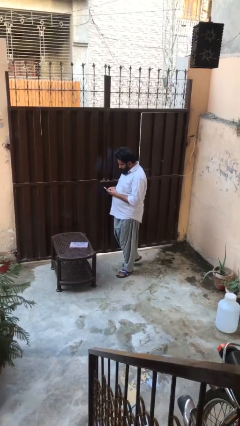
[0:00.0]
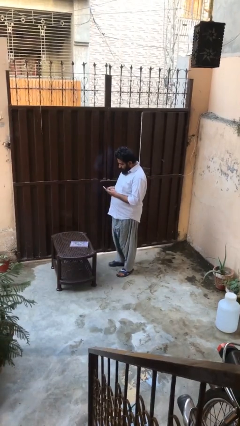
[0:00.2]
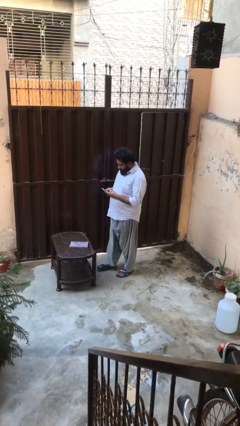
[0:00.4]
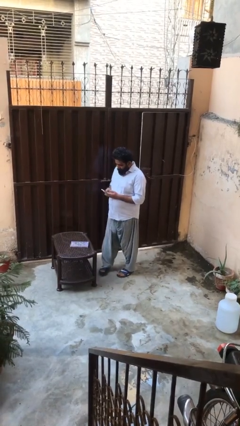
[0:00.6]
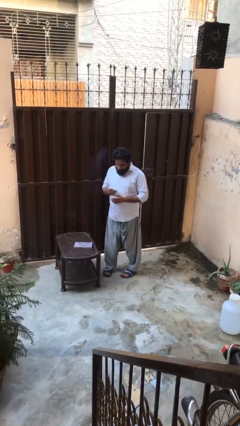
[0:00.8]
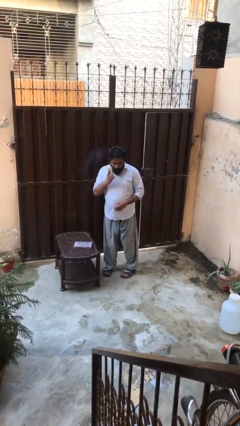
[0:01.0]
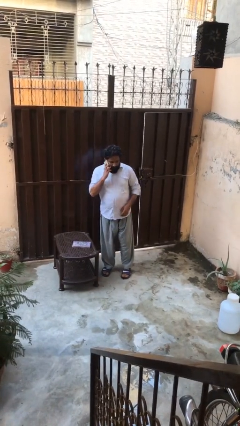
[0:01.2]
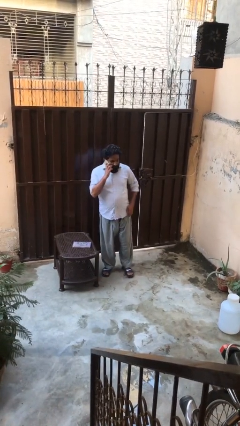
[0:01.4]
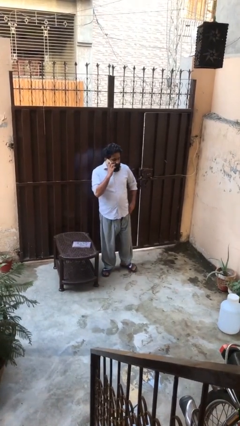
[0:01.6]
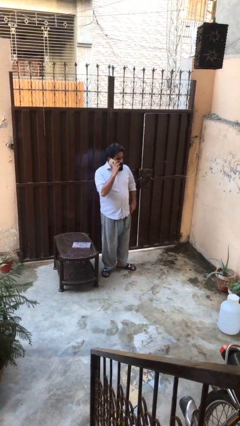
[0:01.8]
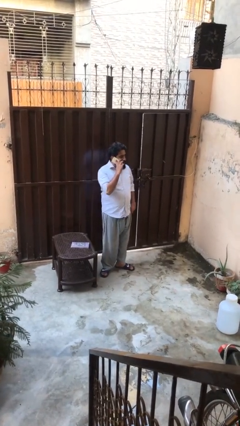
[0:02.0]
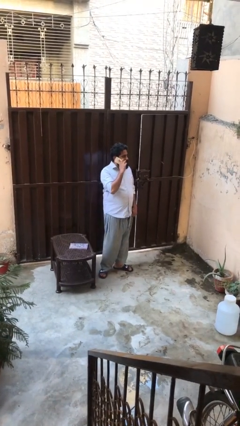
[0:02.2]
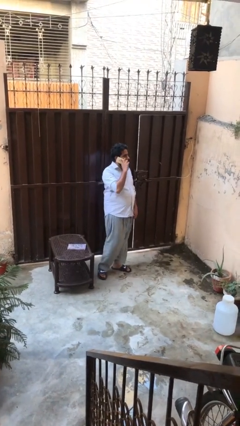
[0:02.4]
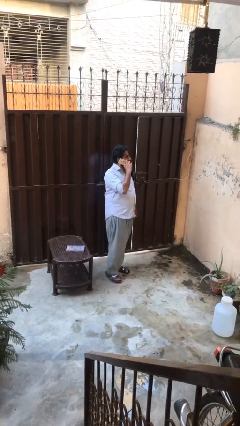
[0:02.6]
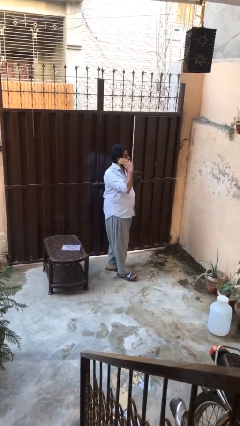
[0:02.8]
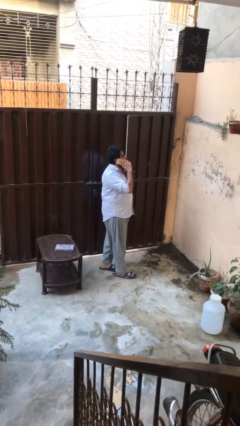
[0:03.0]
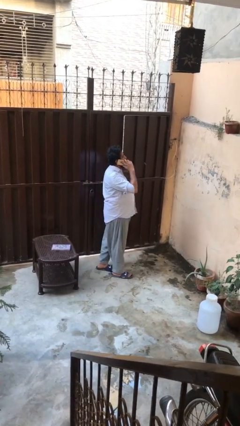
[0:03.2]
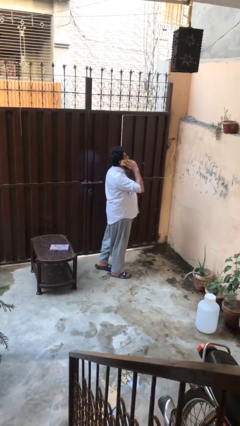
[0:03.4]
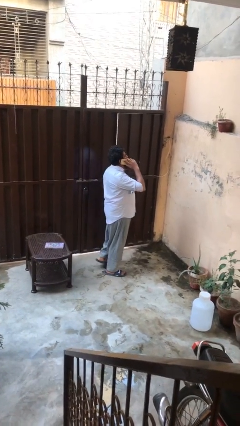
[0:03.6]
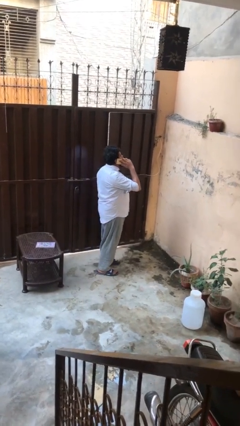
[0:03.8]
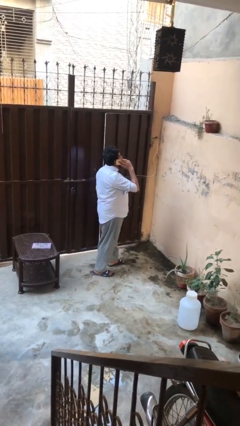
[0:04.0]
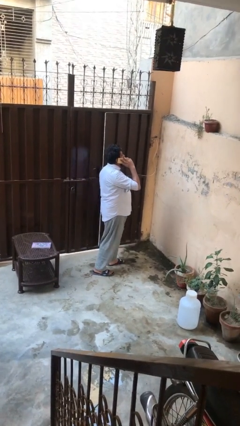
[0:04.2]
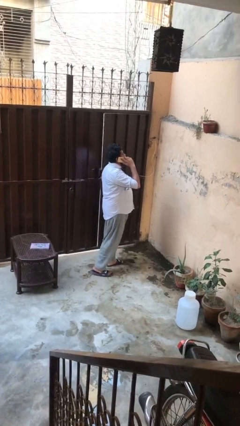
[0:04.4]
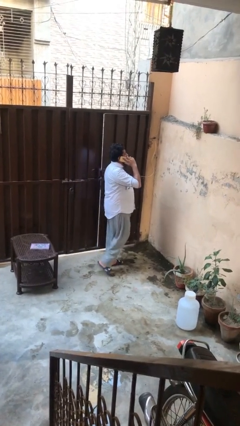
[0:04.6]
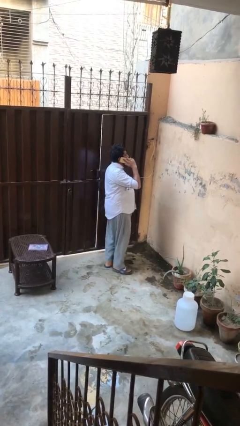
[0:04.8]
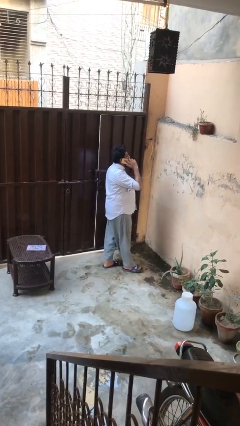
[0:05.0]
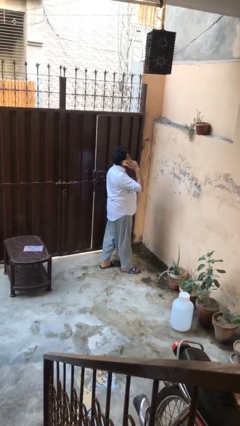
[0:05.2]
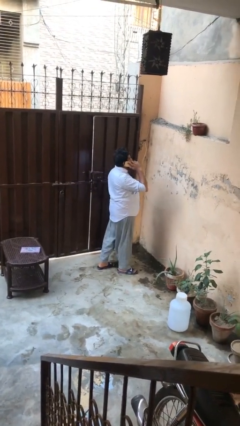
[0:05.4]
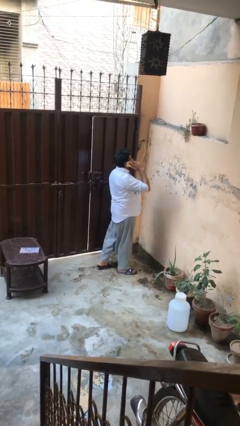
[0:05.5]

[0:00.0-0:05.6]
person talks on phone

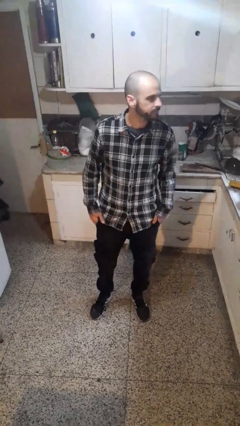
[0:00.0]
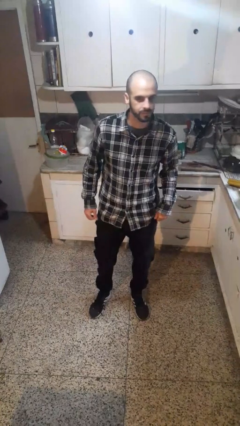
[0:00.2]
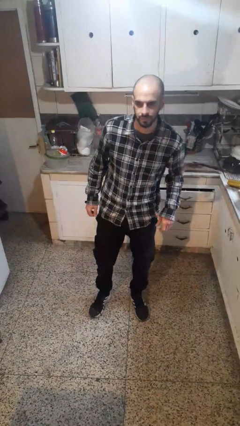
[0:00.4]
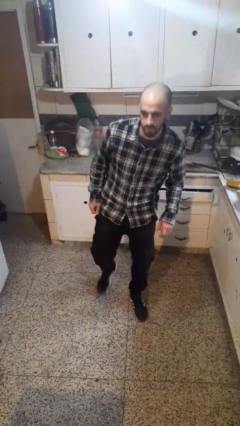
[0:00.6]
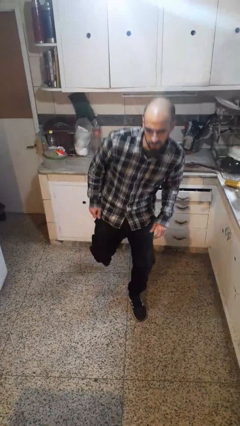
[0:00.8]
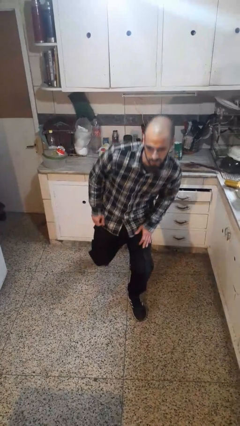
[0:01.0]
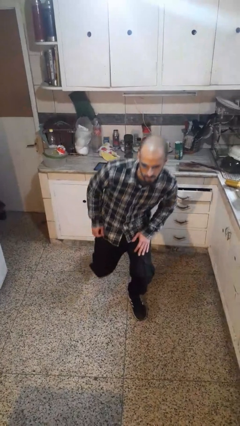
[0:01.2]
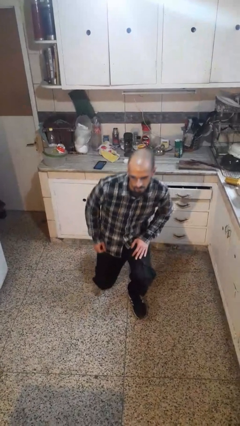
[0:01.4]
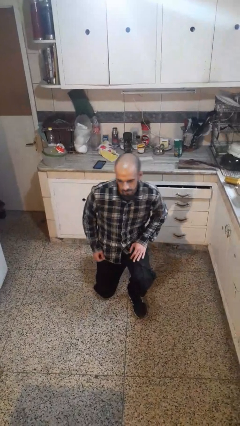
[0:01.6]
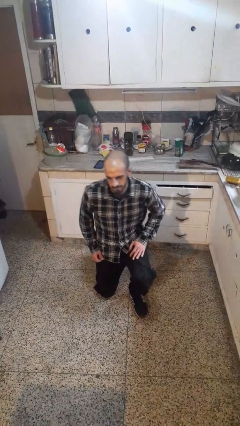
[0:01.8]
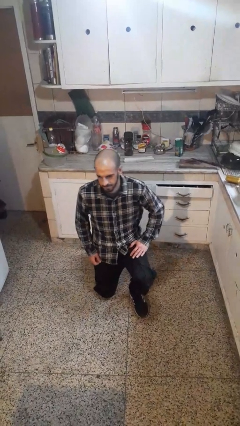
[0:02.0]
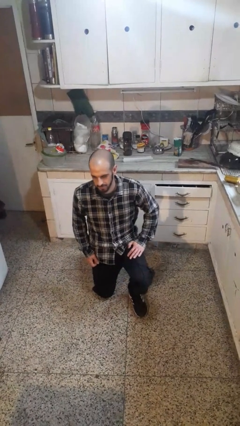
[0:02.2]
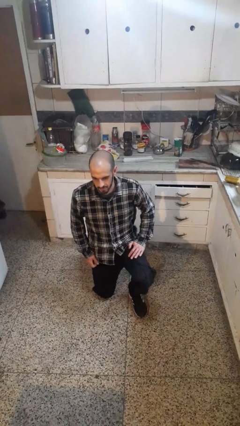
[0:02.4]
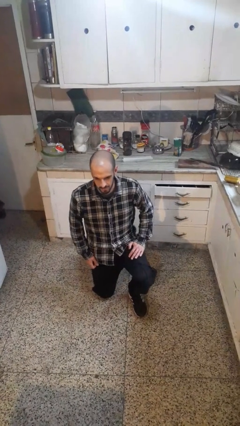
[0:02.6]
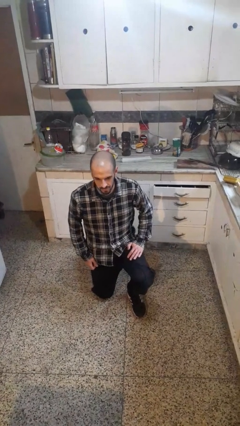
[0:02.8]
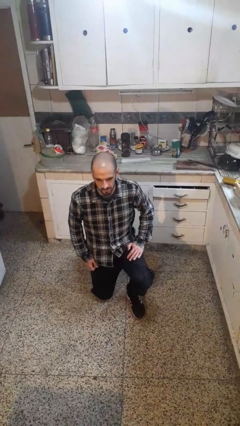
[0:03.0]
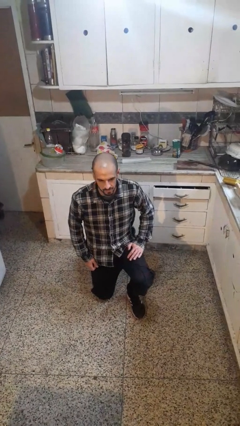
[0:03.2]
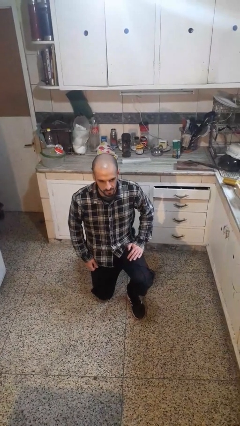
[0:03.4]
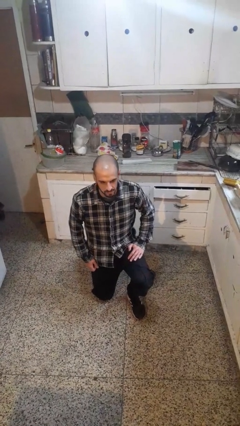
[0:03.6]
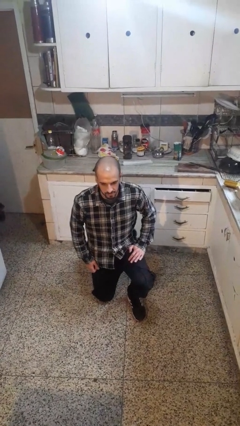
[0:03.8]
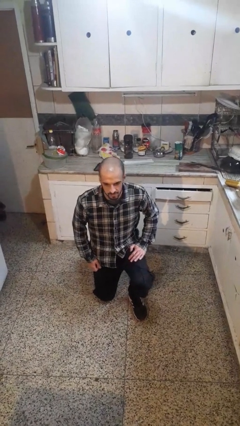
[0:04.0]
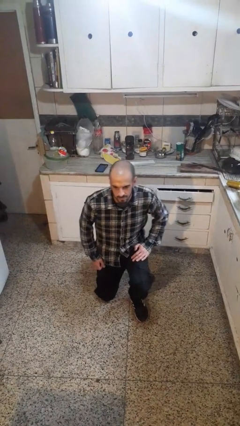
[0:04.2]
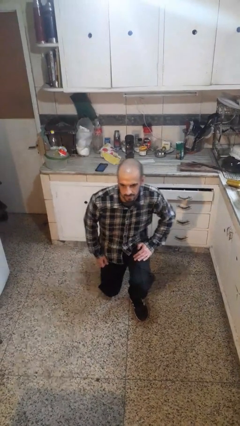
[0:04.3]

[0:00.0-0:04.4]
person kneels

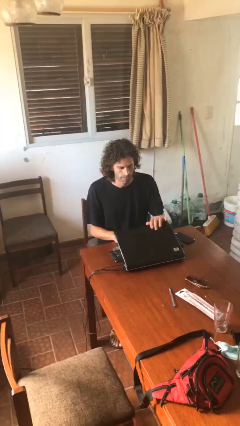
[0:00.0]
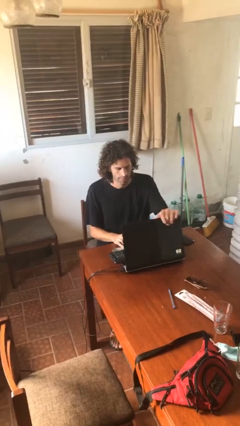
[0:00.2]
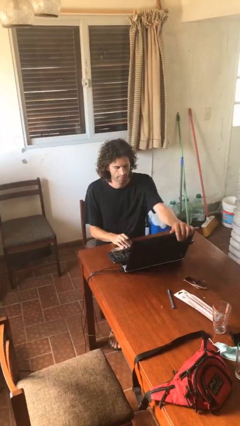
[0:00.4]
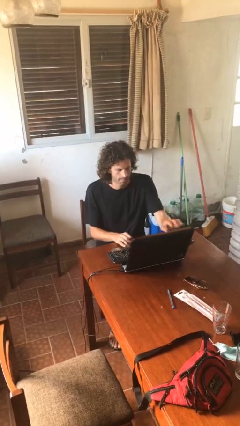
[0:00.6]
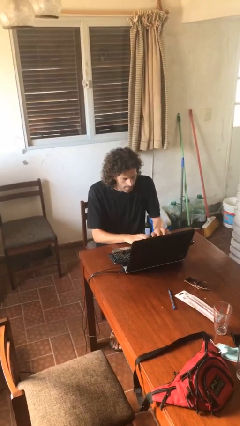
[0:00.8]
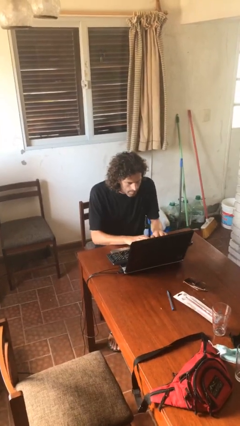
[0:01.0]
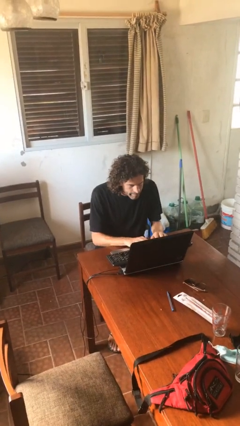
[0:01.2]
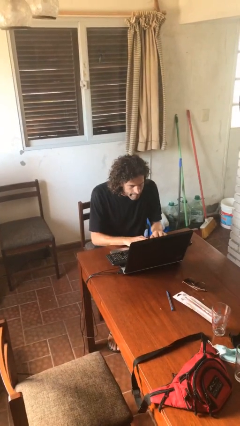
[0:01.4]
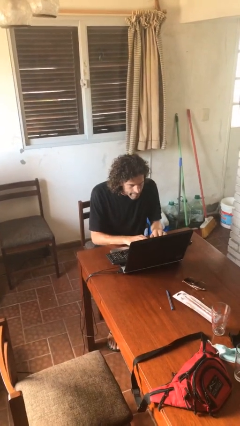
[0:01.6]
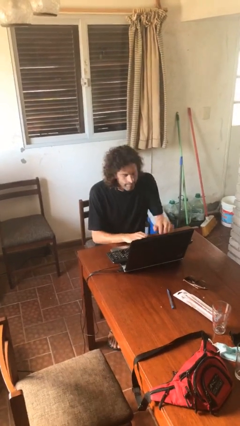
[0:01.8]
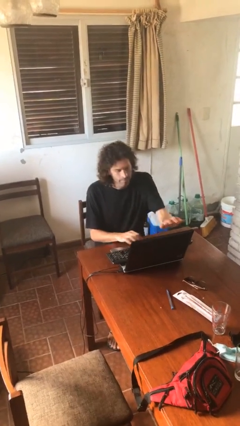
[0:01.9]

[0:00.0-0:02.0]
person interacts with laptop

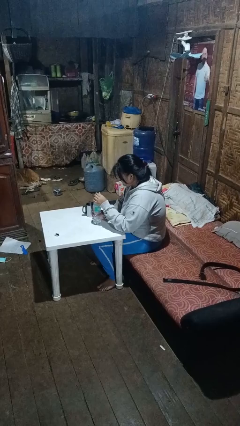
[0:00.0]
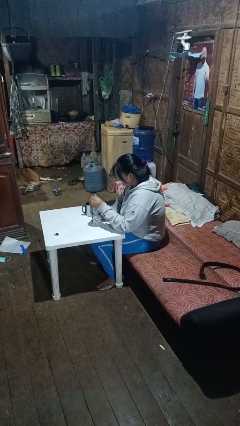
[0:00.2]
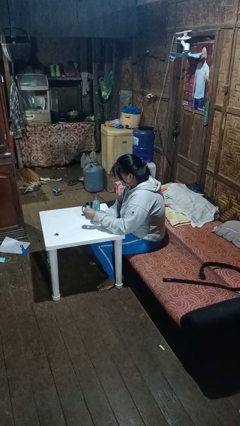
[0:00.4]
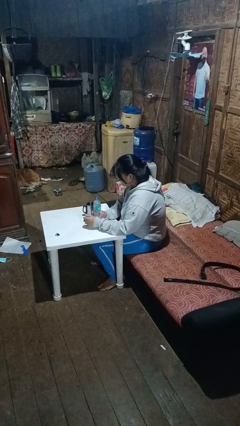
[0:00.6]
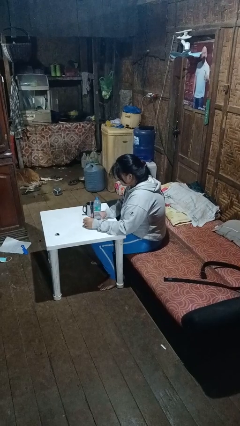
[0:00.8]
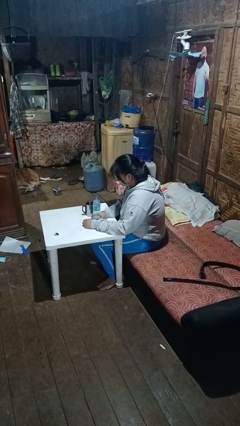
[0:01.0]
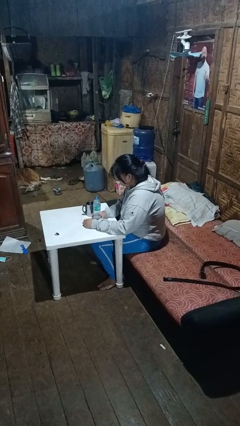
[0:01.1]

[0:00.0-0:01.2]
person unscrews lid from bottle

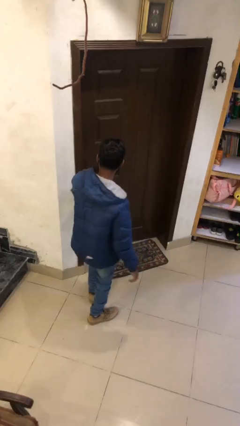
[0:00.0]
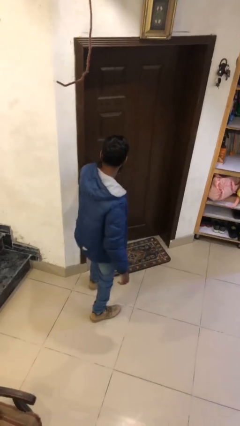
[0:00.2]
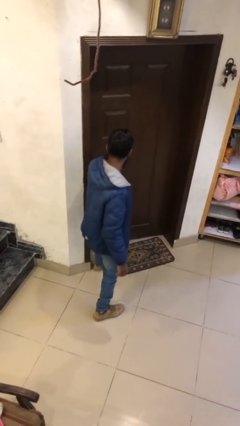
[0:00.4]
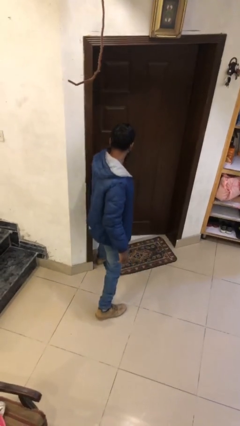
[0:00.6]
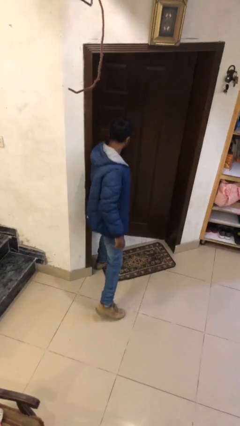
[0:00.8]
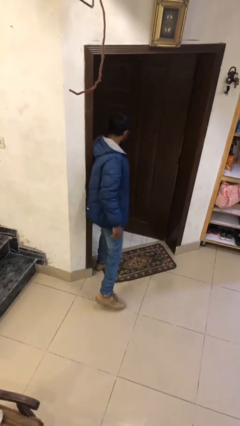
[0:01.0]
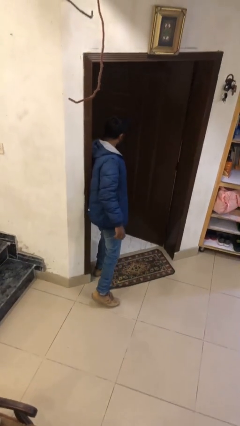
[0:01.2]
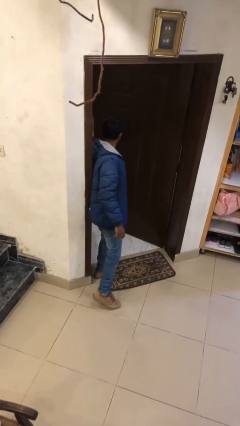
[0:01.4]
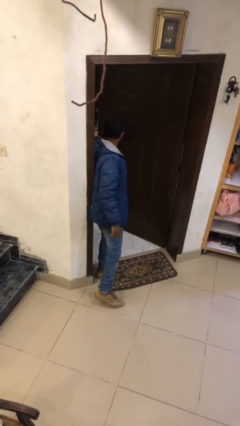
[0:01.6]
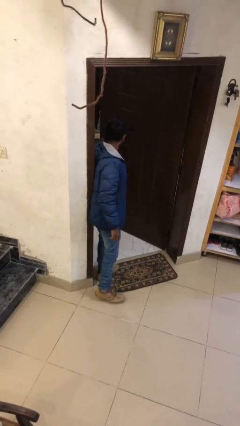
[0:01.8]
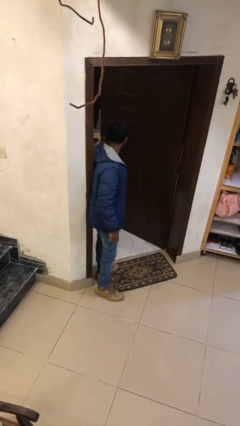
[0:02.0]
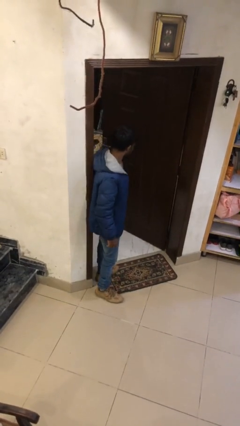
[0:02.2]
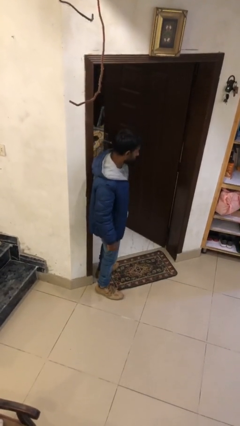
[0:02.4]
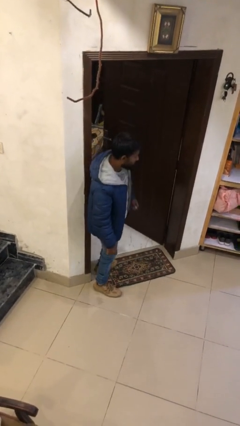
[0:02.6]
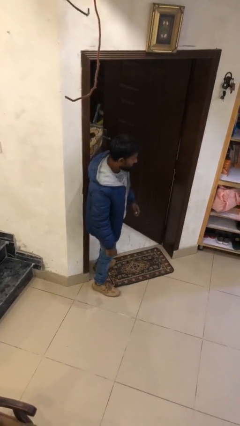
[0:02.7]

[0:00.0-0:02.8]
person opens facility door

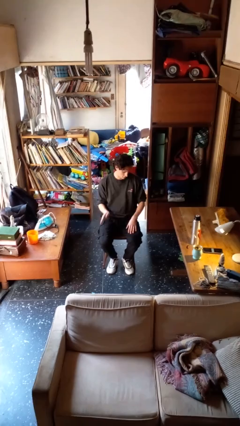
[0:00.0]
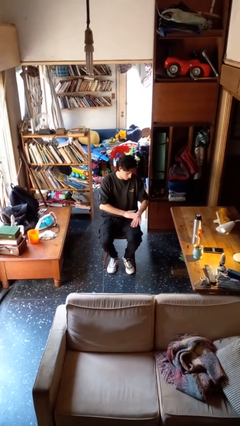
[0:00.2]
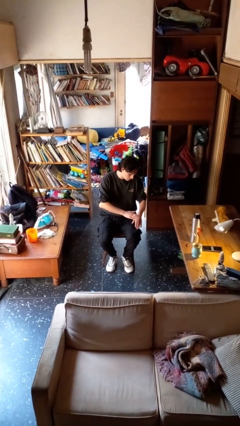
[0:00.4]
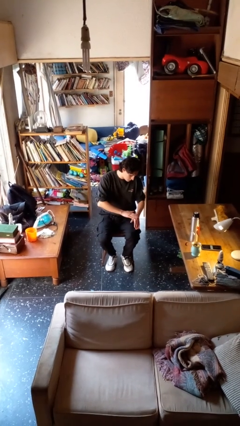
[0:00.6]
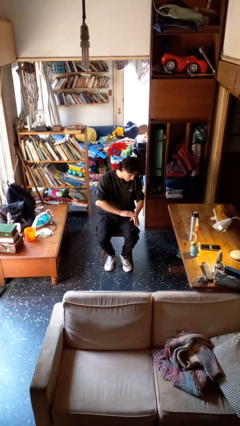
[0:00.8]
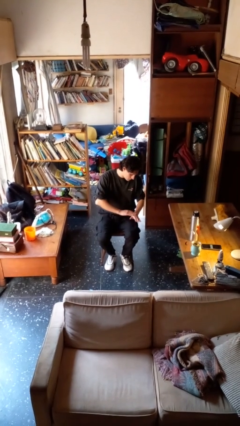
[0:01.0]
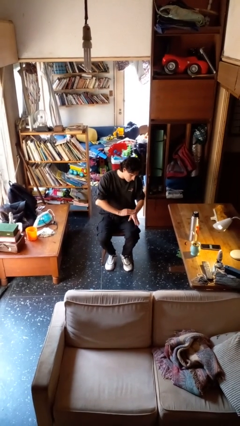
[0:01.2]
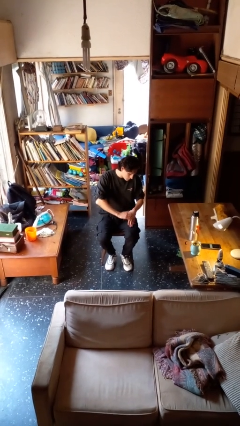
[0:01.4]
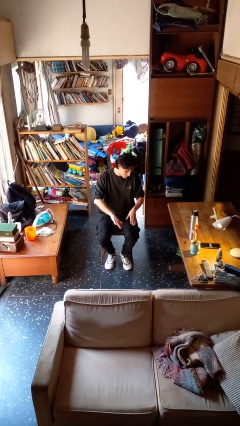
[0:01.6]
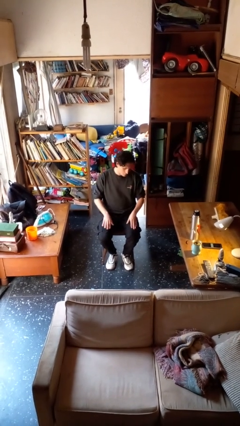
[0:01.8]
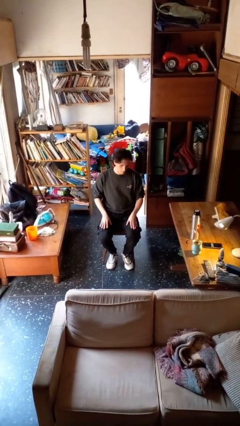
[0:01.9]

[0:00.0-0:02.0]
person swats bug
